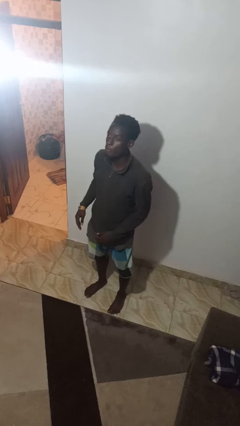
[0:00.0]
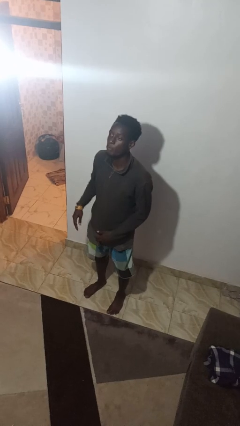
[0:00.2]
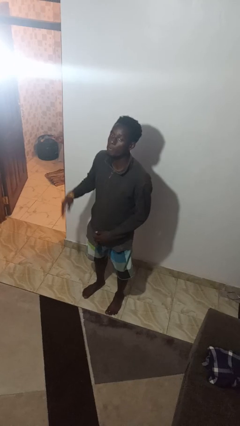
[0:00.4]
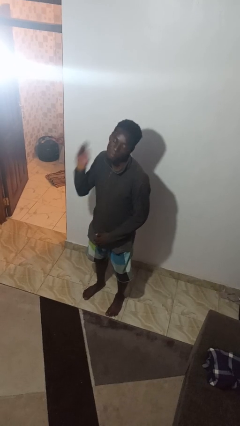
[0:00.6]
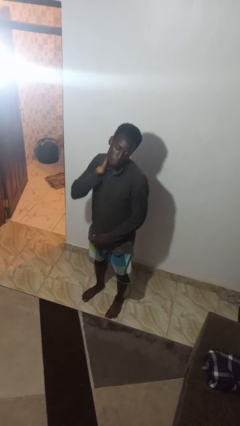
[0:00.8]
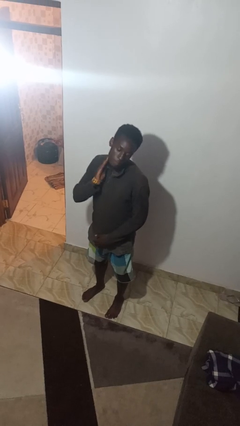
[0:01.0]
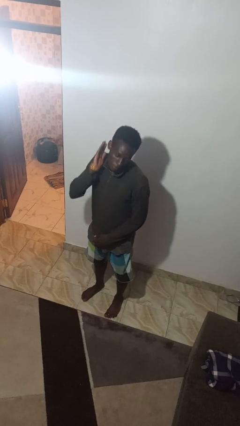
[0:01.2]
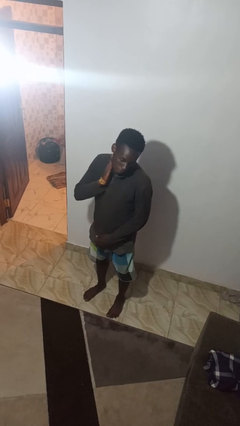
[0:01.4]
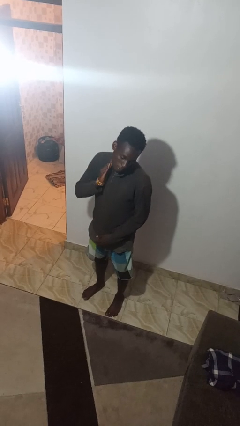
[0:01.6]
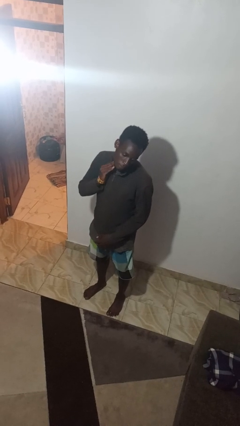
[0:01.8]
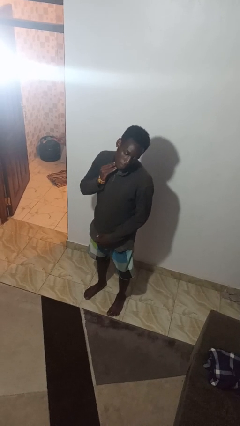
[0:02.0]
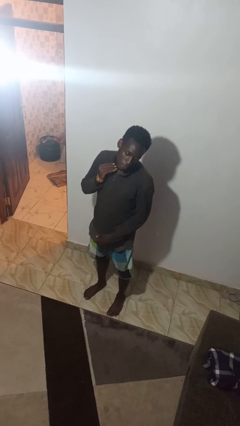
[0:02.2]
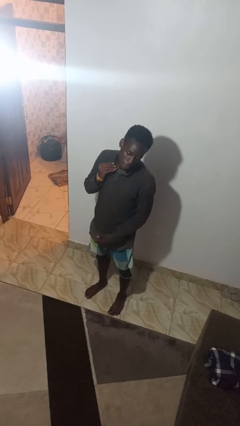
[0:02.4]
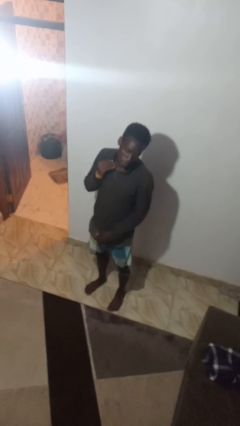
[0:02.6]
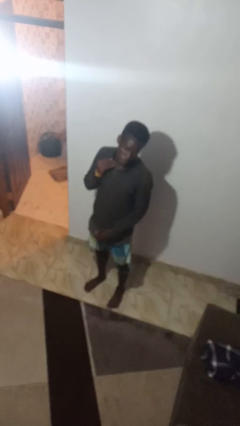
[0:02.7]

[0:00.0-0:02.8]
person swats bug

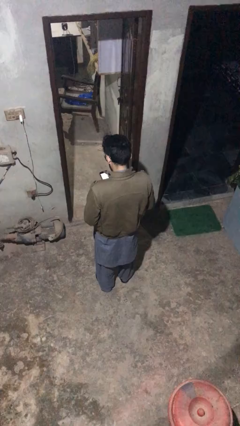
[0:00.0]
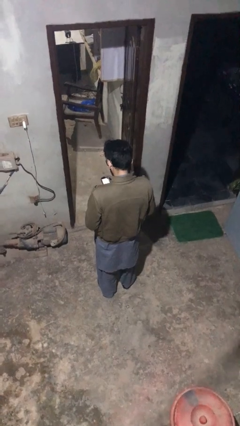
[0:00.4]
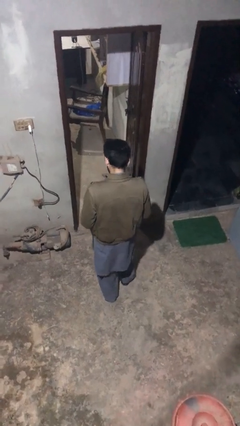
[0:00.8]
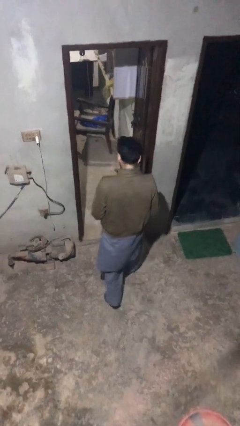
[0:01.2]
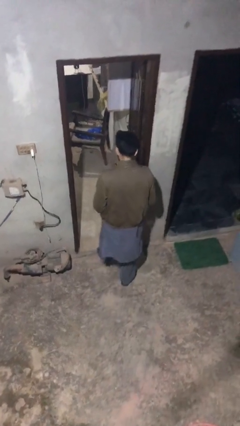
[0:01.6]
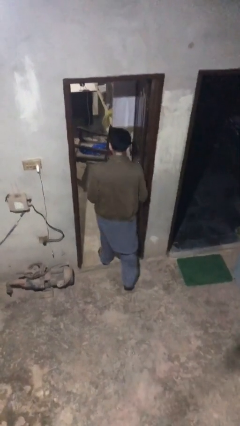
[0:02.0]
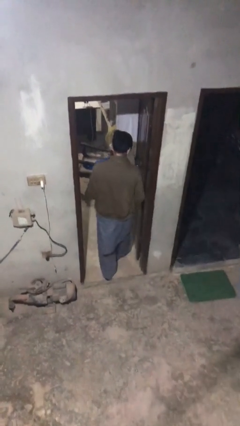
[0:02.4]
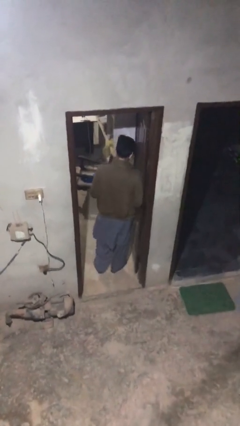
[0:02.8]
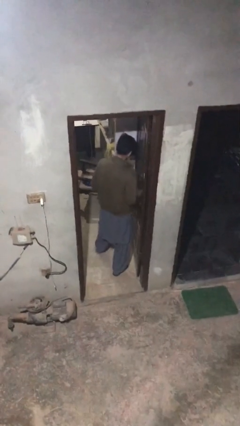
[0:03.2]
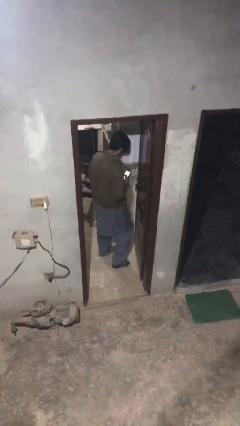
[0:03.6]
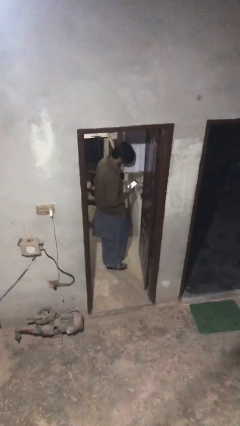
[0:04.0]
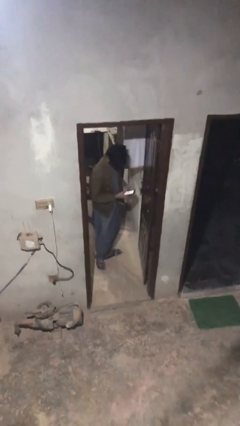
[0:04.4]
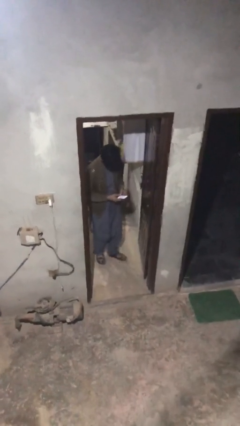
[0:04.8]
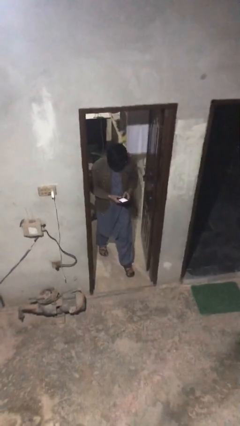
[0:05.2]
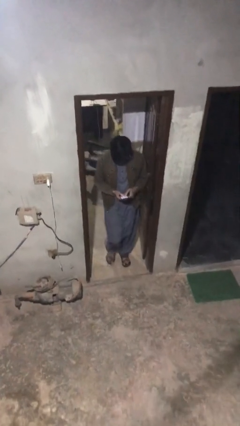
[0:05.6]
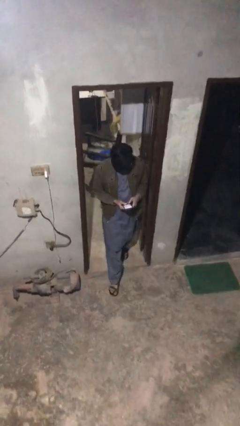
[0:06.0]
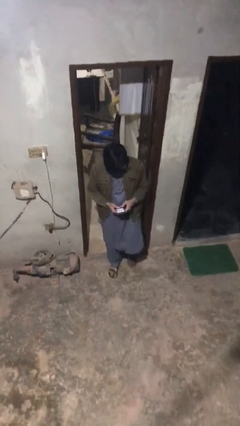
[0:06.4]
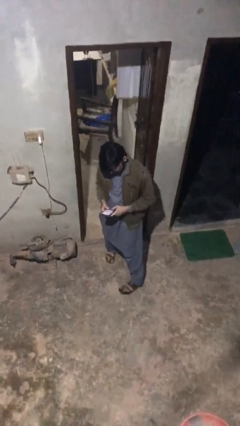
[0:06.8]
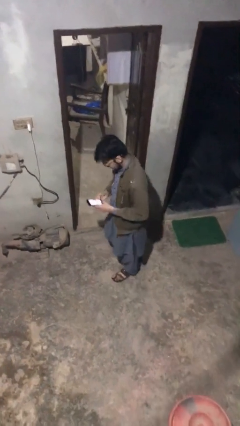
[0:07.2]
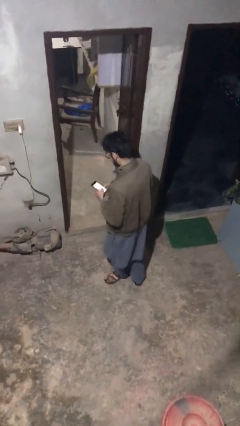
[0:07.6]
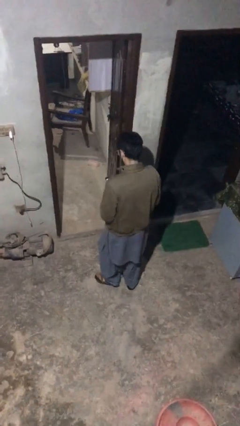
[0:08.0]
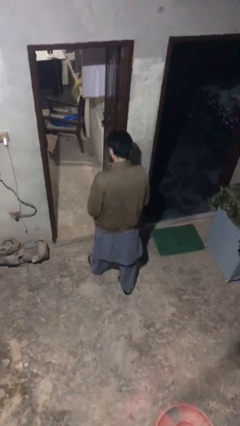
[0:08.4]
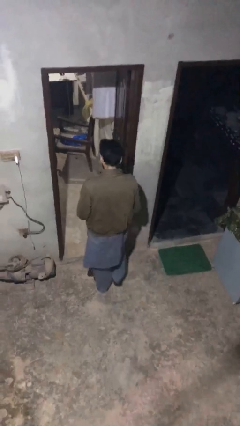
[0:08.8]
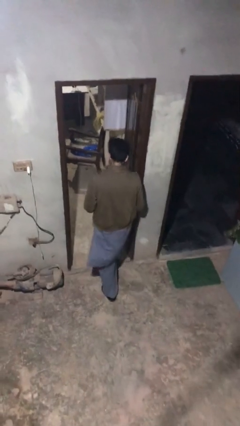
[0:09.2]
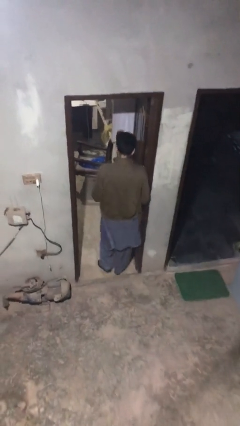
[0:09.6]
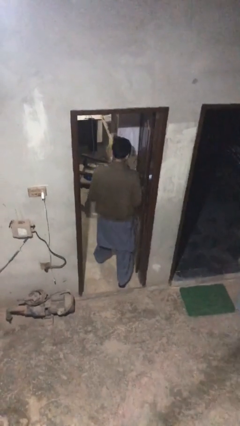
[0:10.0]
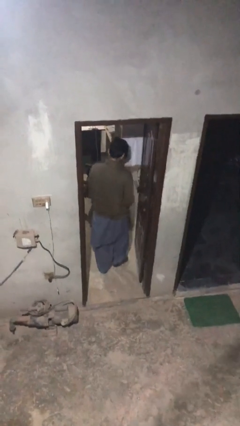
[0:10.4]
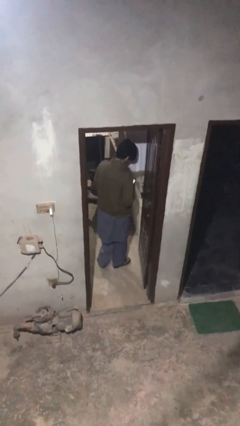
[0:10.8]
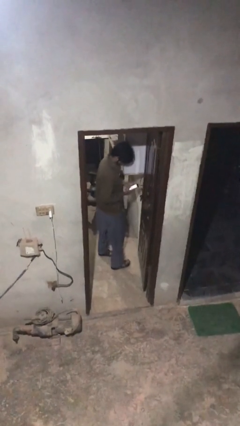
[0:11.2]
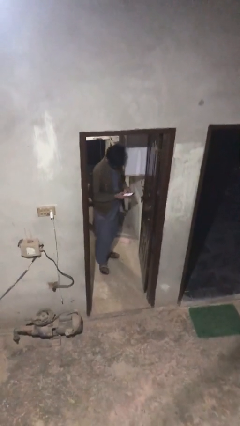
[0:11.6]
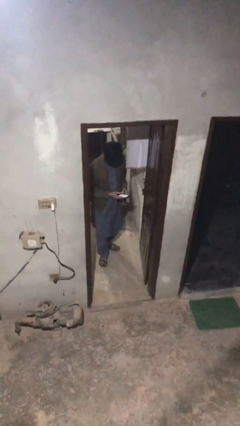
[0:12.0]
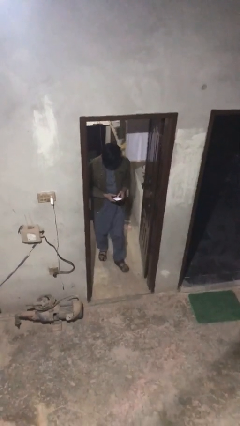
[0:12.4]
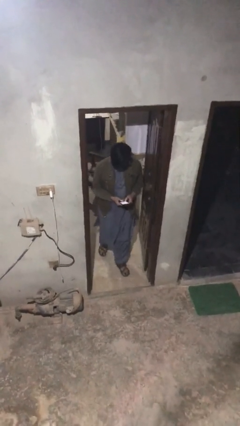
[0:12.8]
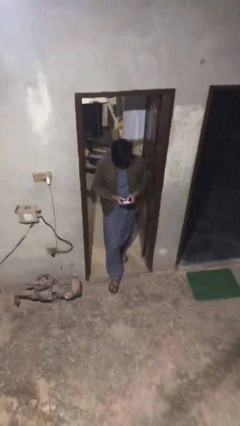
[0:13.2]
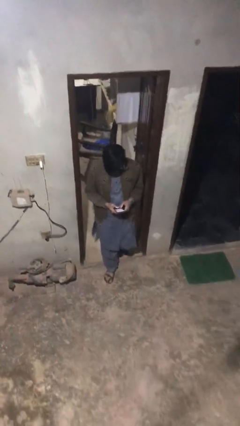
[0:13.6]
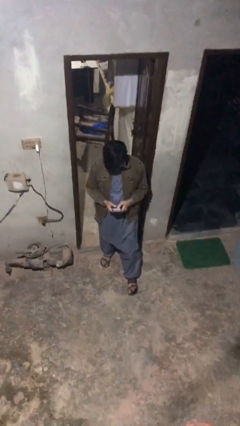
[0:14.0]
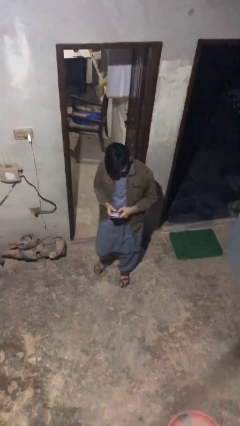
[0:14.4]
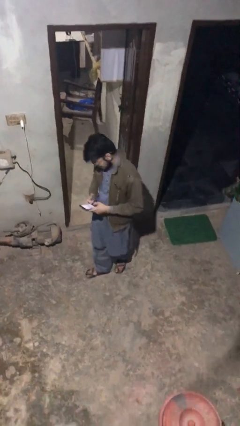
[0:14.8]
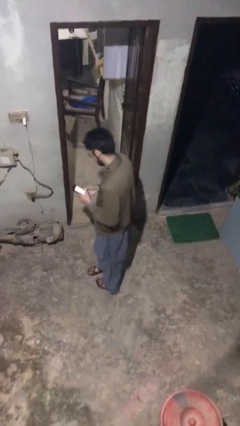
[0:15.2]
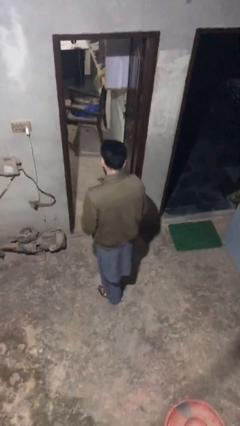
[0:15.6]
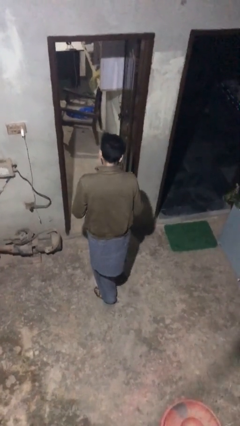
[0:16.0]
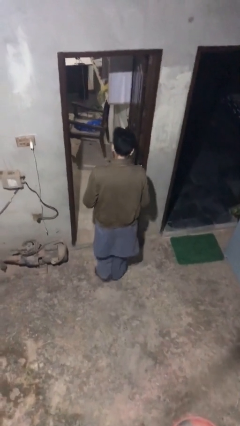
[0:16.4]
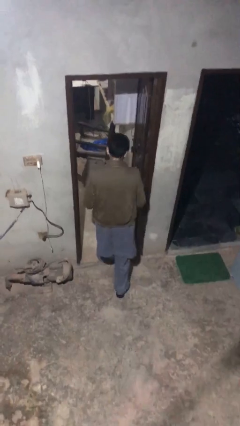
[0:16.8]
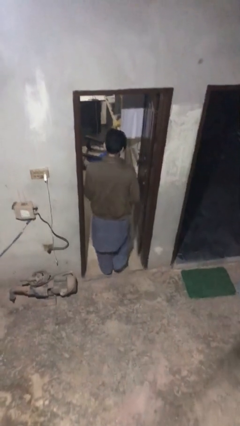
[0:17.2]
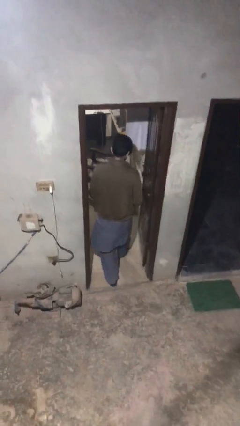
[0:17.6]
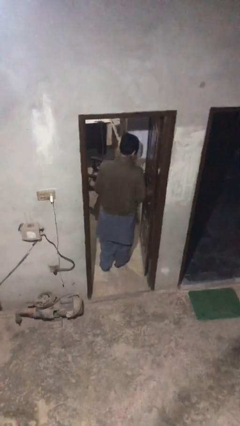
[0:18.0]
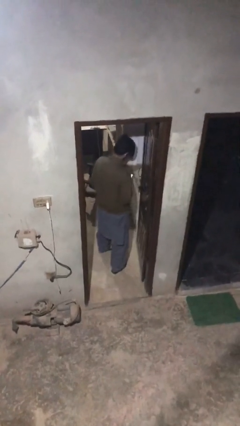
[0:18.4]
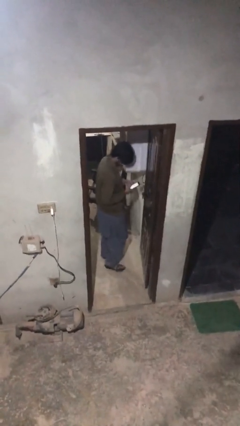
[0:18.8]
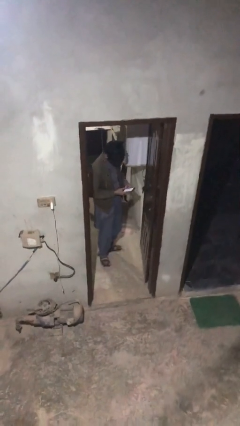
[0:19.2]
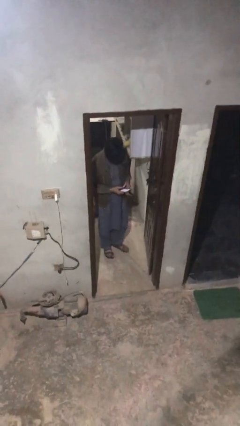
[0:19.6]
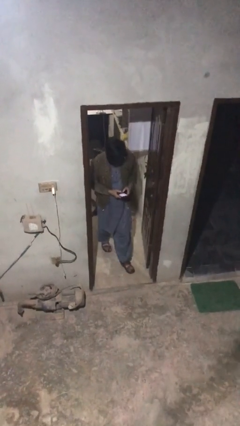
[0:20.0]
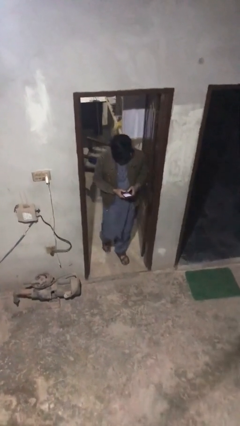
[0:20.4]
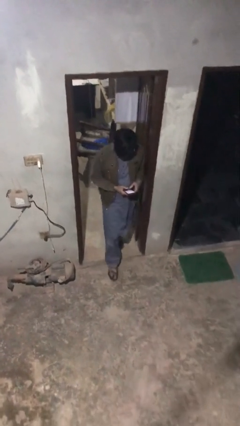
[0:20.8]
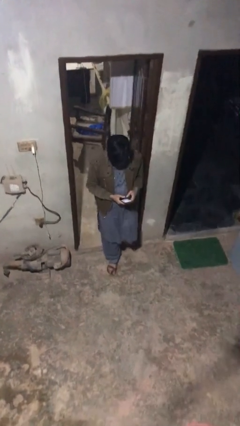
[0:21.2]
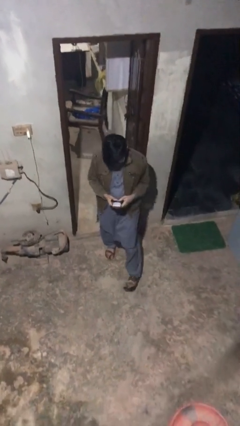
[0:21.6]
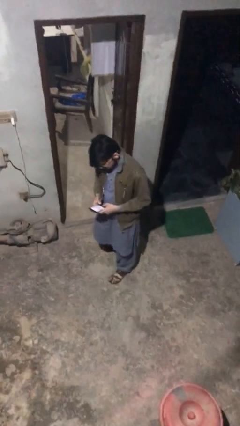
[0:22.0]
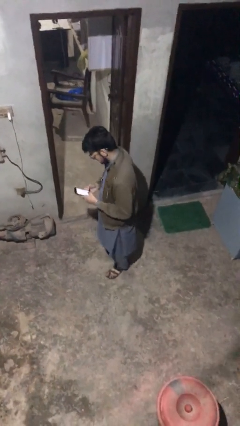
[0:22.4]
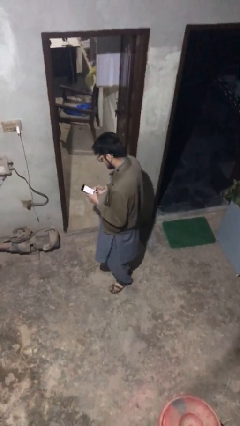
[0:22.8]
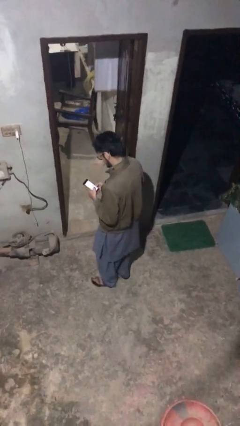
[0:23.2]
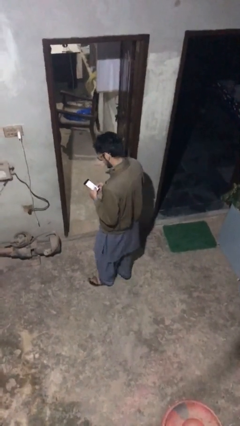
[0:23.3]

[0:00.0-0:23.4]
person texts on phone

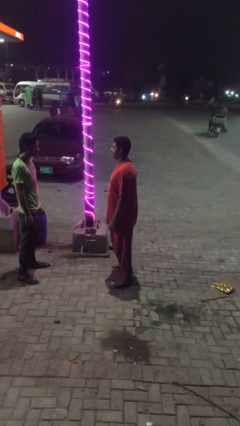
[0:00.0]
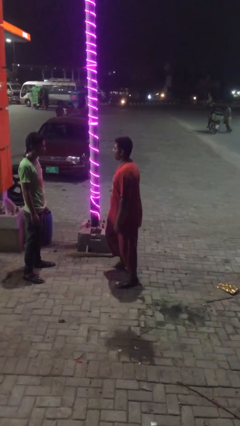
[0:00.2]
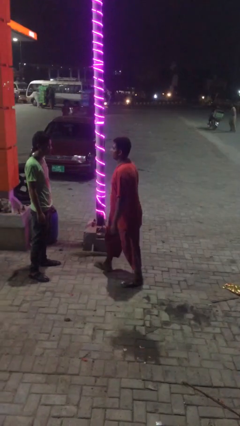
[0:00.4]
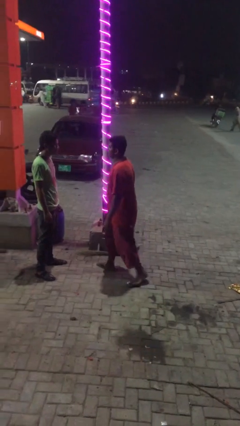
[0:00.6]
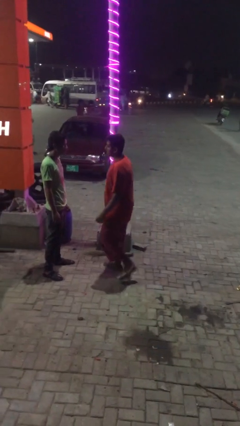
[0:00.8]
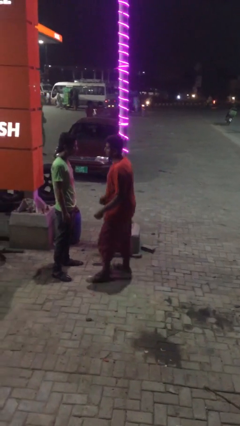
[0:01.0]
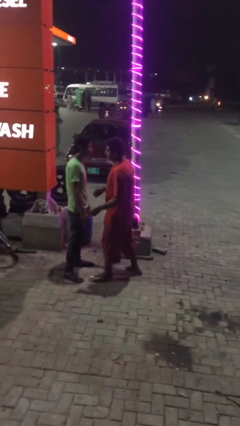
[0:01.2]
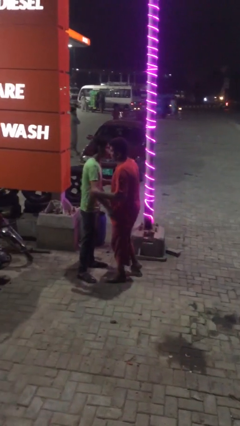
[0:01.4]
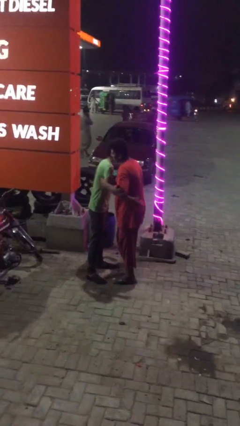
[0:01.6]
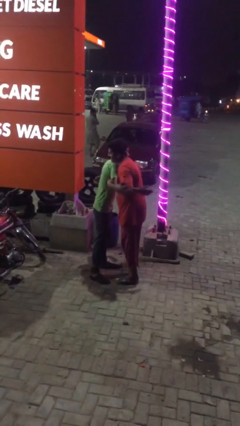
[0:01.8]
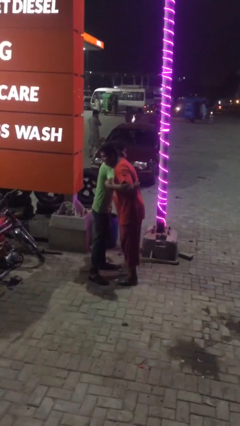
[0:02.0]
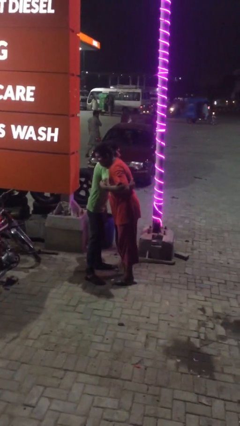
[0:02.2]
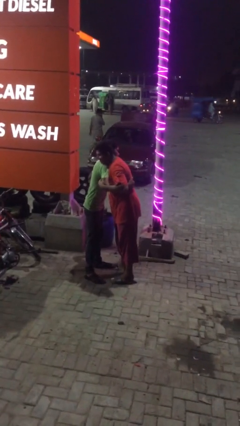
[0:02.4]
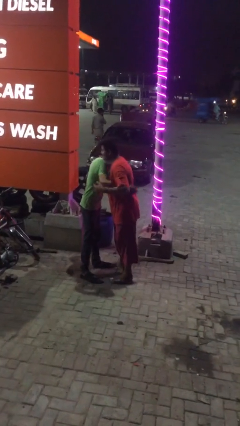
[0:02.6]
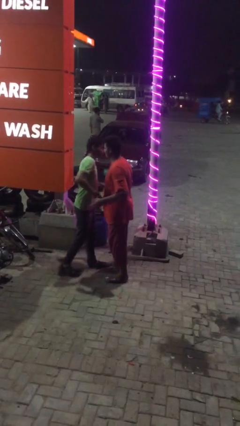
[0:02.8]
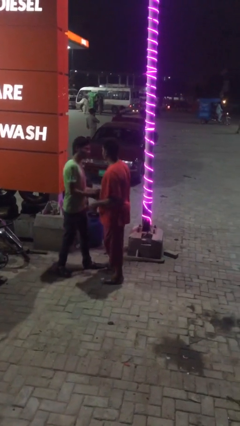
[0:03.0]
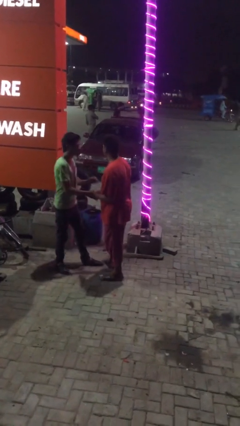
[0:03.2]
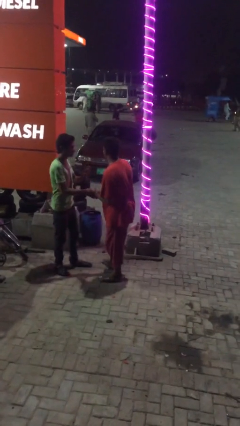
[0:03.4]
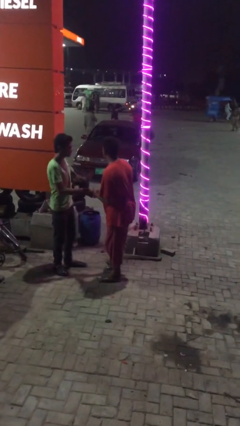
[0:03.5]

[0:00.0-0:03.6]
person embraces person
